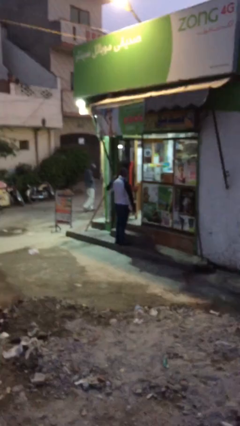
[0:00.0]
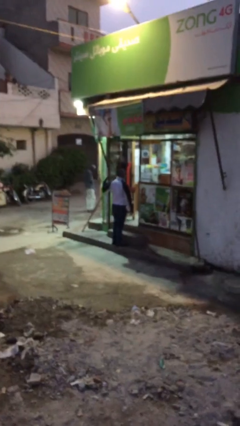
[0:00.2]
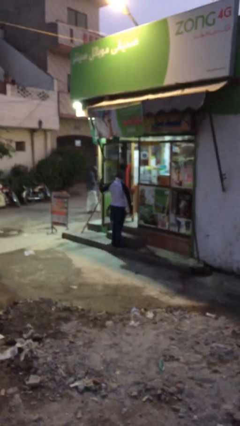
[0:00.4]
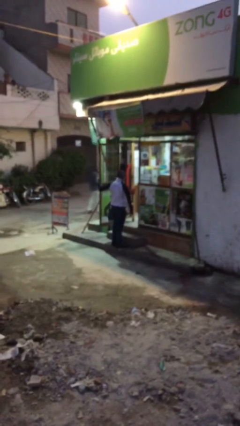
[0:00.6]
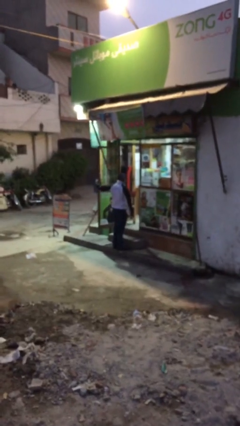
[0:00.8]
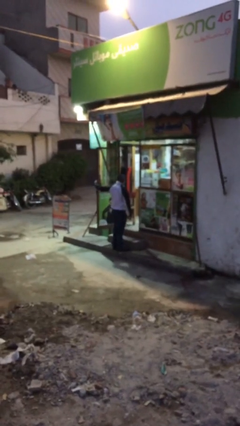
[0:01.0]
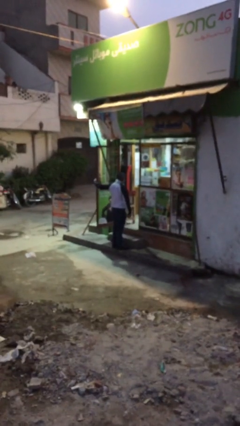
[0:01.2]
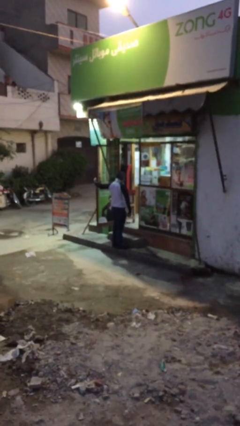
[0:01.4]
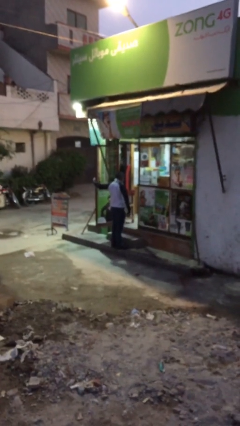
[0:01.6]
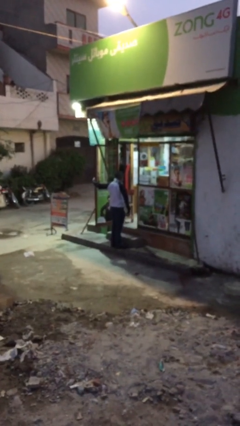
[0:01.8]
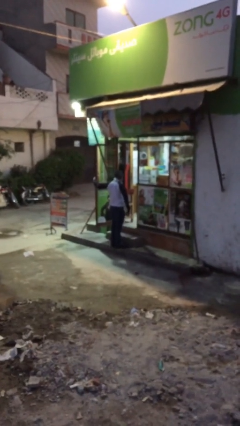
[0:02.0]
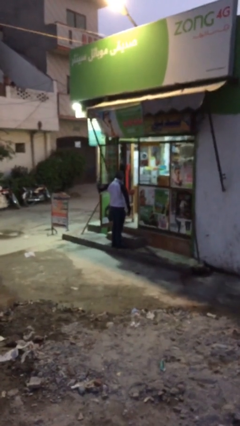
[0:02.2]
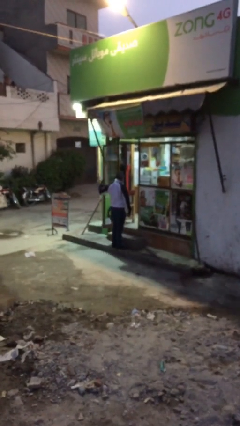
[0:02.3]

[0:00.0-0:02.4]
person opens facility door

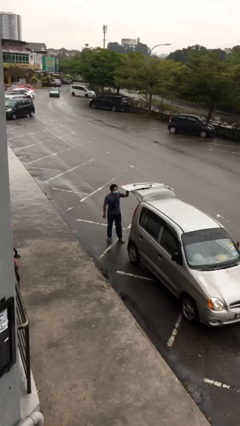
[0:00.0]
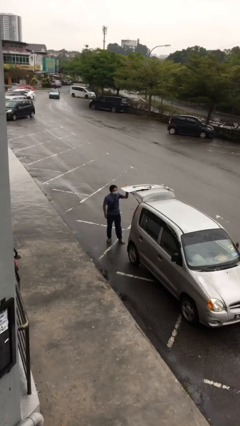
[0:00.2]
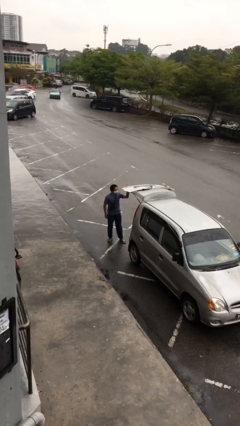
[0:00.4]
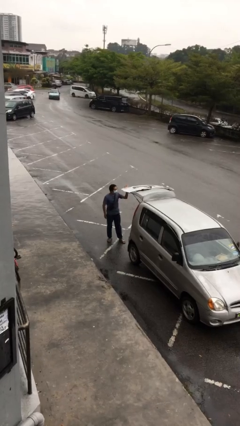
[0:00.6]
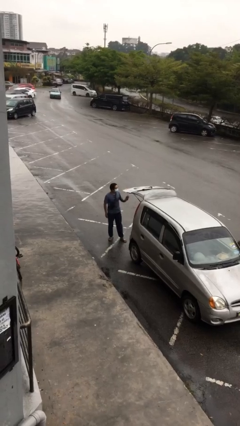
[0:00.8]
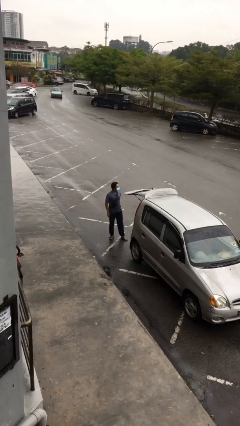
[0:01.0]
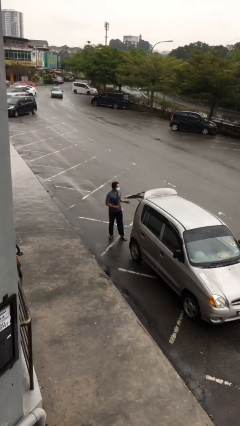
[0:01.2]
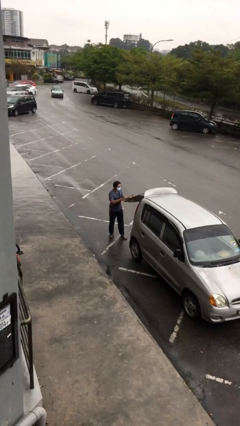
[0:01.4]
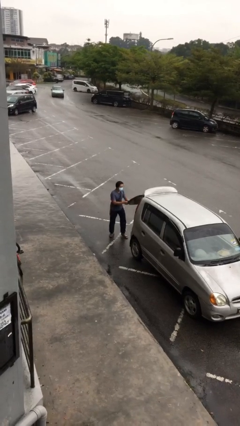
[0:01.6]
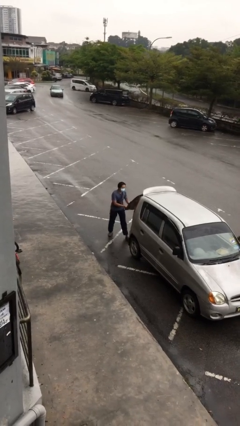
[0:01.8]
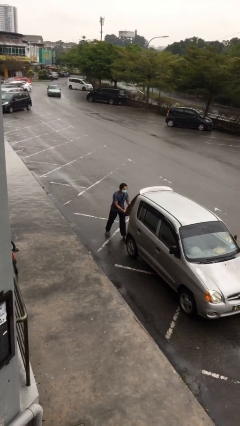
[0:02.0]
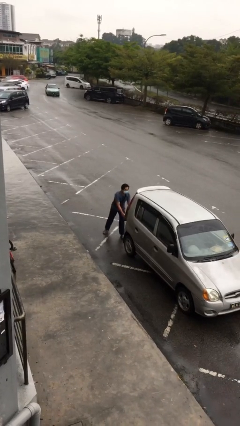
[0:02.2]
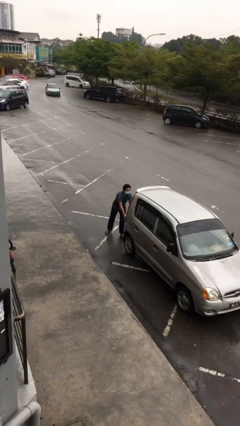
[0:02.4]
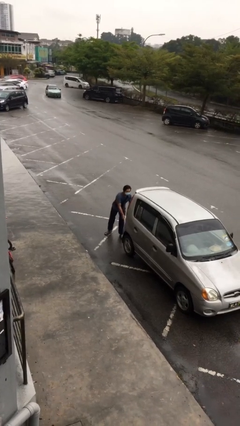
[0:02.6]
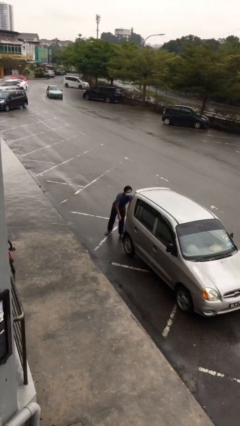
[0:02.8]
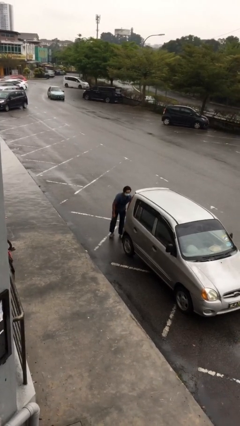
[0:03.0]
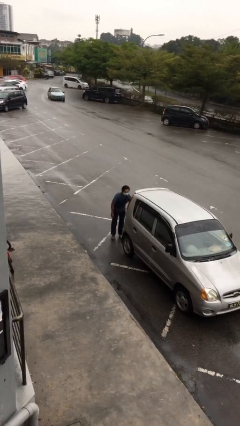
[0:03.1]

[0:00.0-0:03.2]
person closes car trunk

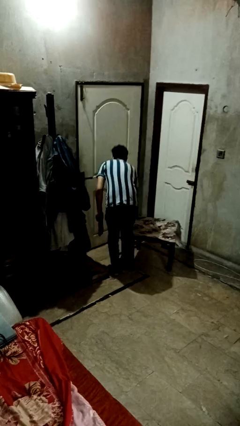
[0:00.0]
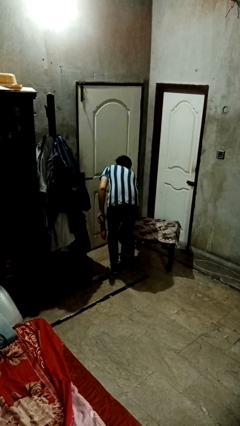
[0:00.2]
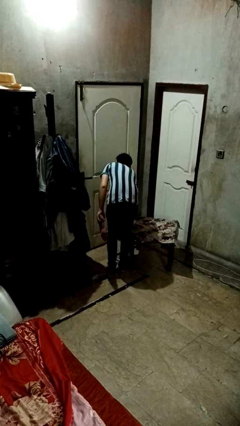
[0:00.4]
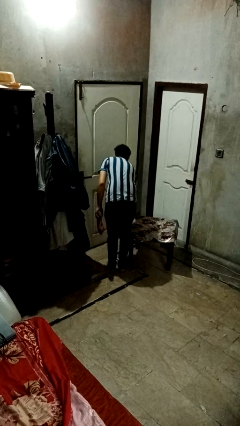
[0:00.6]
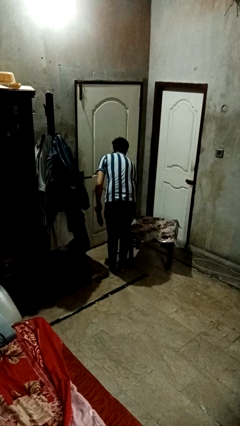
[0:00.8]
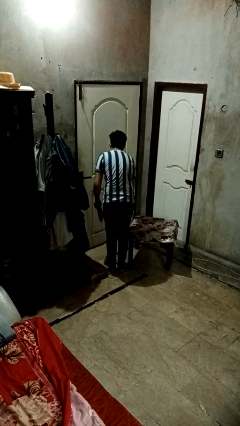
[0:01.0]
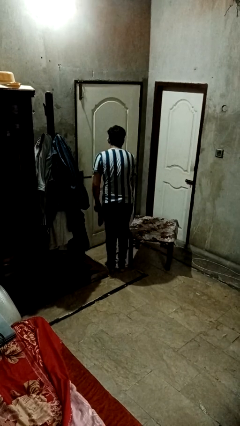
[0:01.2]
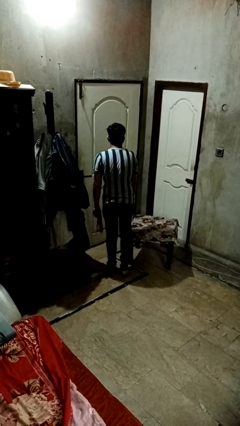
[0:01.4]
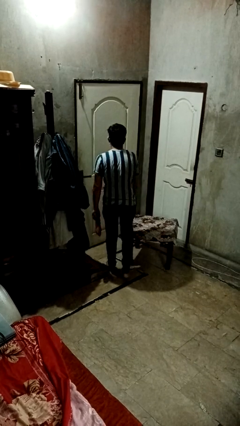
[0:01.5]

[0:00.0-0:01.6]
person bumps into table

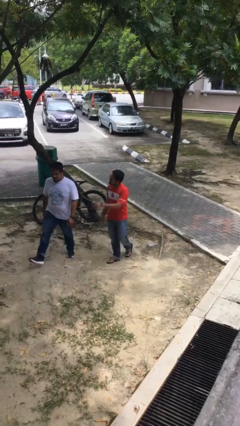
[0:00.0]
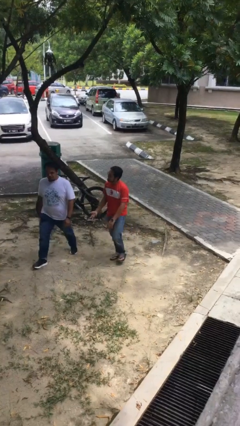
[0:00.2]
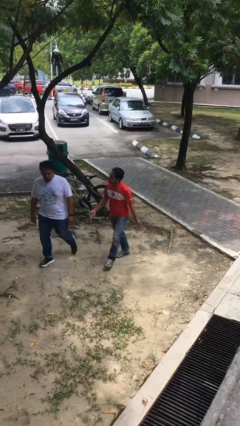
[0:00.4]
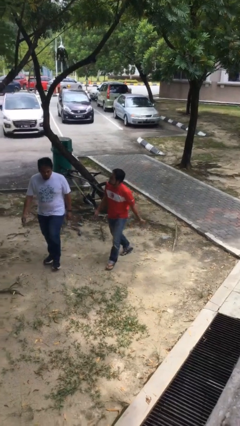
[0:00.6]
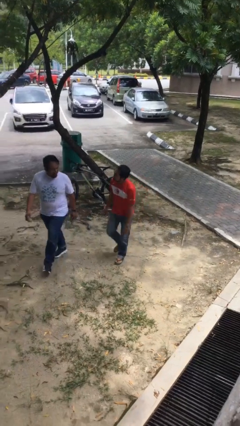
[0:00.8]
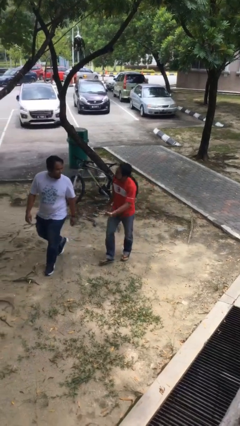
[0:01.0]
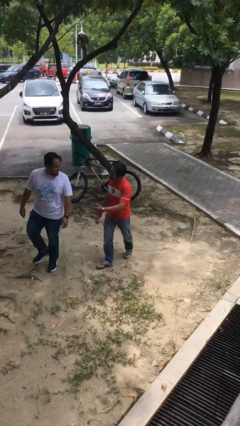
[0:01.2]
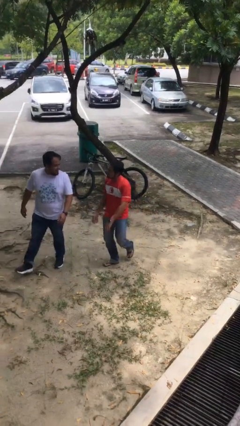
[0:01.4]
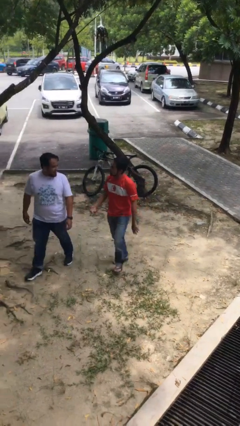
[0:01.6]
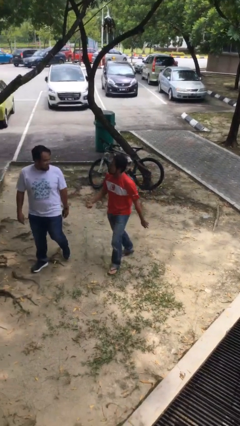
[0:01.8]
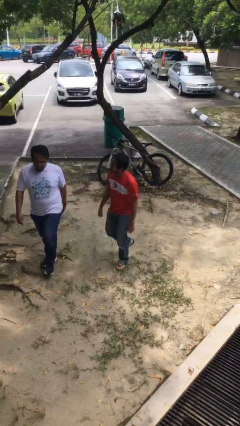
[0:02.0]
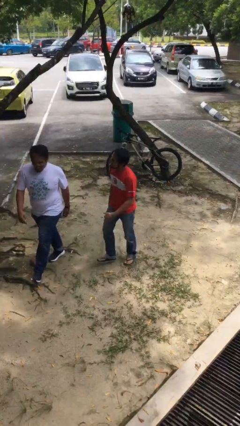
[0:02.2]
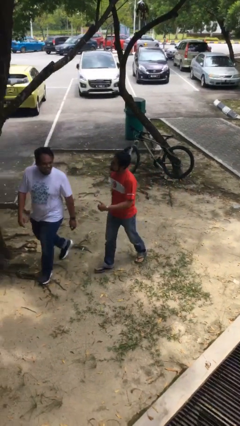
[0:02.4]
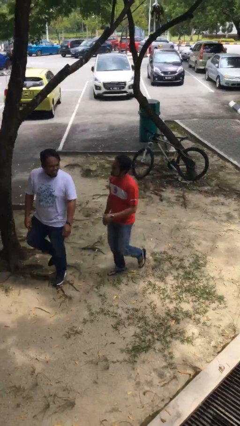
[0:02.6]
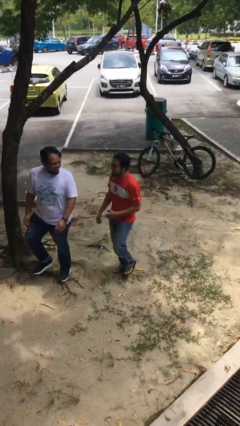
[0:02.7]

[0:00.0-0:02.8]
person talks to person

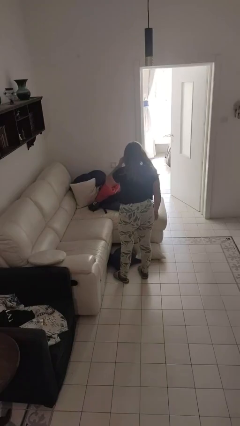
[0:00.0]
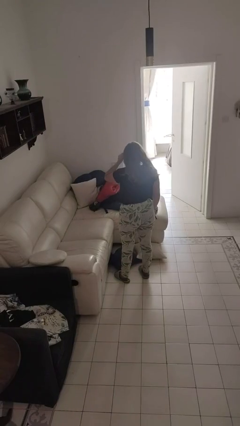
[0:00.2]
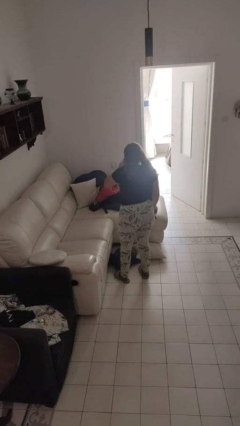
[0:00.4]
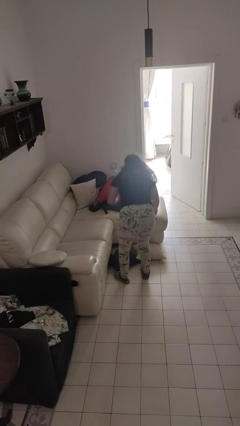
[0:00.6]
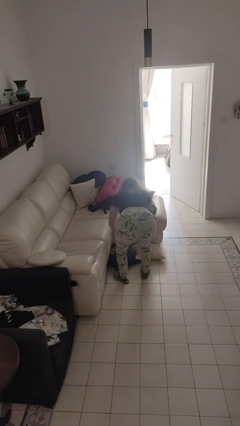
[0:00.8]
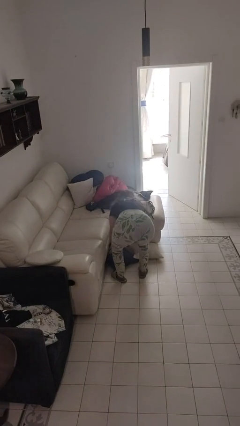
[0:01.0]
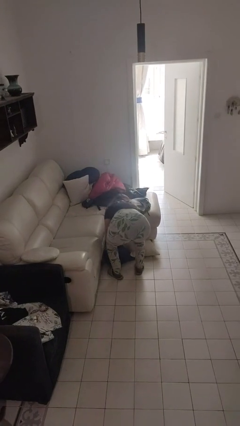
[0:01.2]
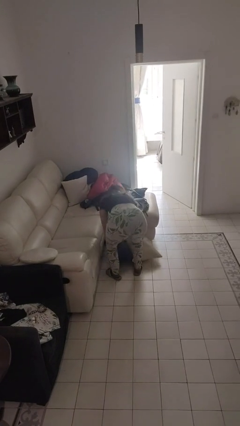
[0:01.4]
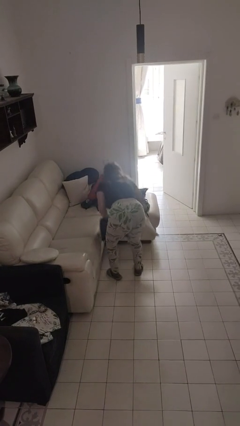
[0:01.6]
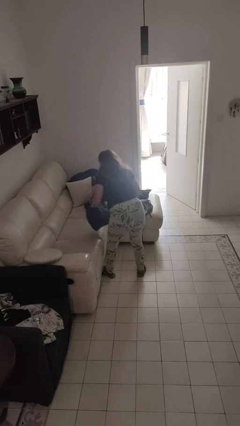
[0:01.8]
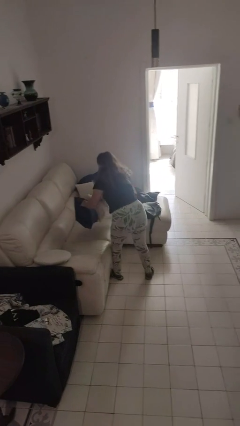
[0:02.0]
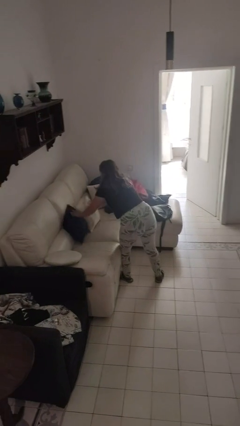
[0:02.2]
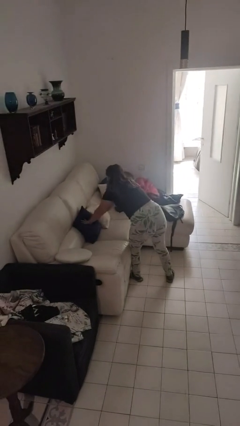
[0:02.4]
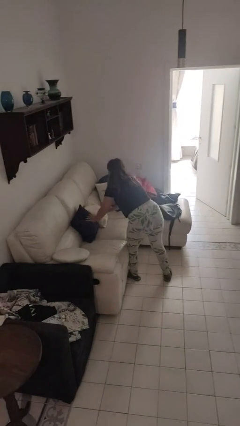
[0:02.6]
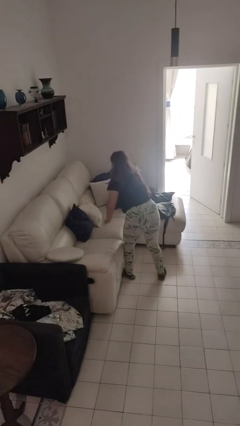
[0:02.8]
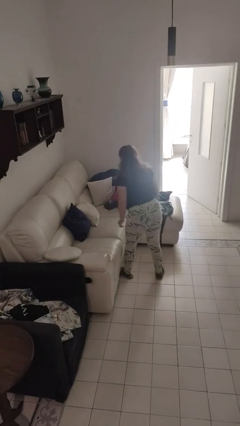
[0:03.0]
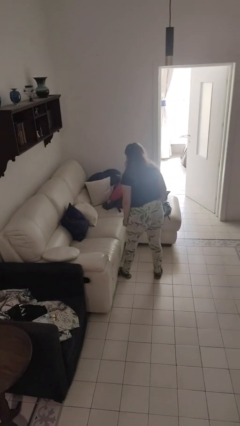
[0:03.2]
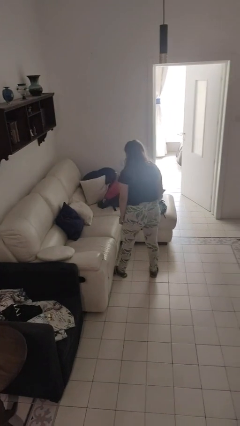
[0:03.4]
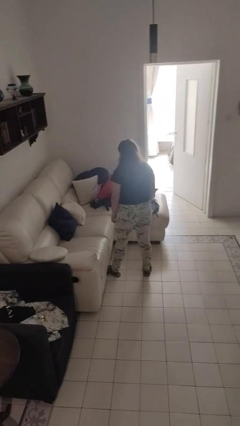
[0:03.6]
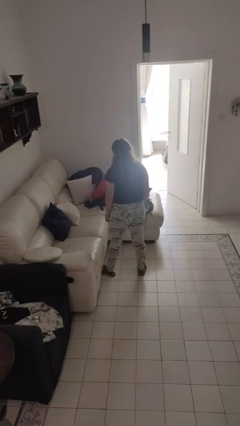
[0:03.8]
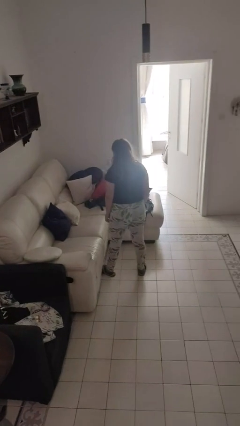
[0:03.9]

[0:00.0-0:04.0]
person sets upright furniture

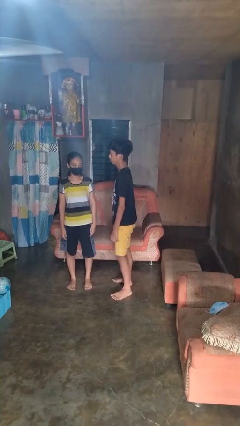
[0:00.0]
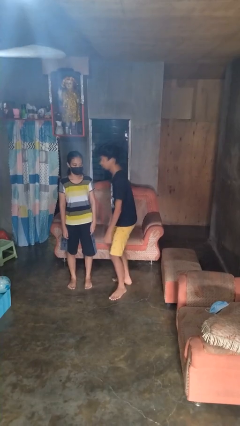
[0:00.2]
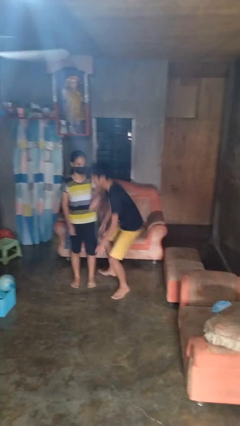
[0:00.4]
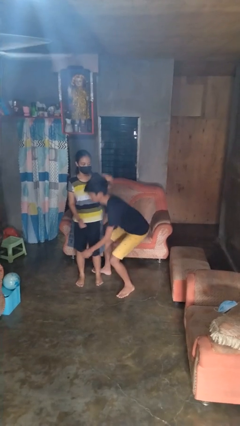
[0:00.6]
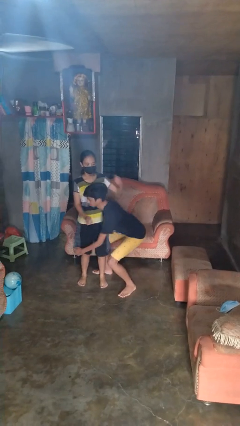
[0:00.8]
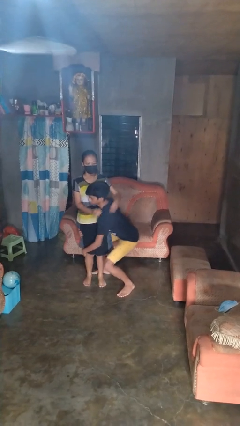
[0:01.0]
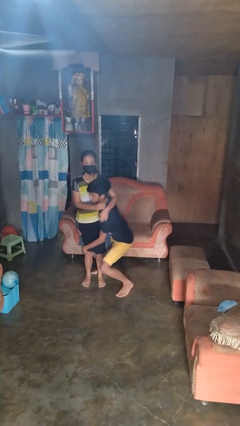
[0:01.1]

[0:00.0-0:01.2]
person carries person over shoulder

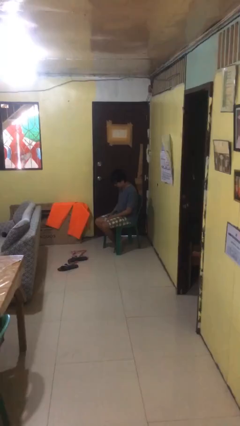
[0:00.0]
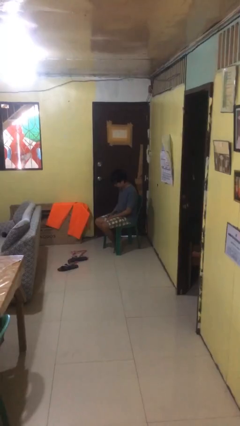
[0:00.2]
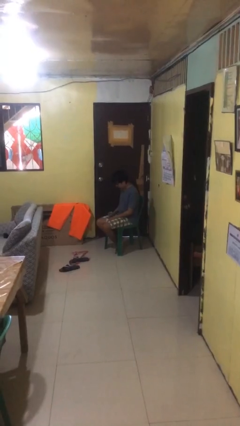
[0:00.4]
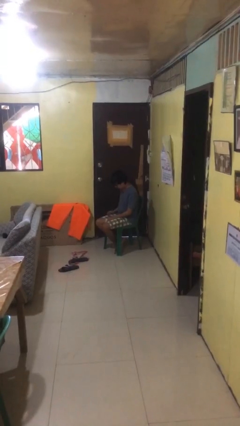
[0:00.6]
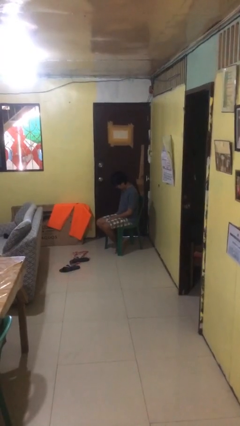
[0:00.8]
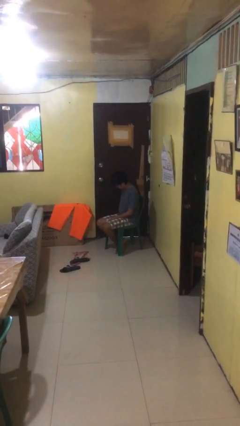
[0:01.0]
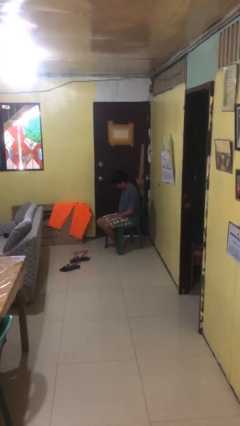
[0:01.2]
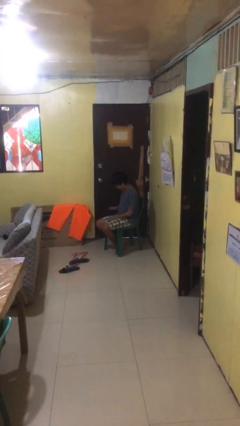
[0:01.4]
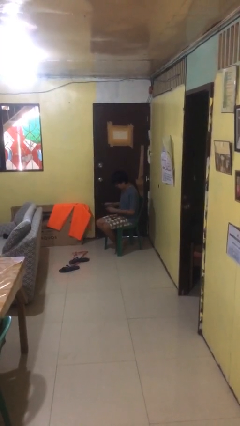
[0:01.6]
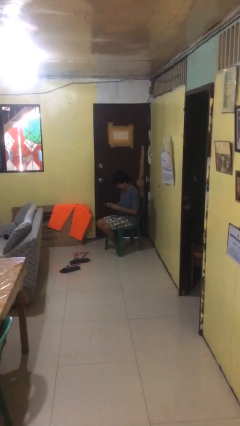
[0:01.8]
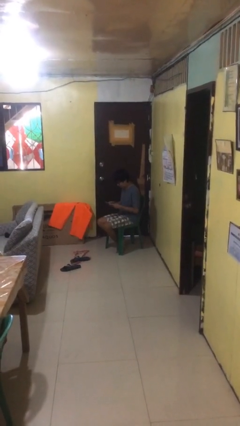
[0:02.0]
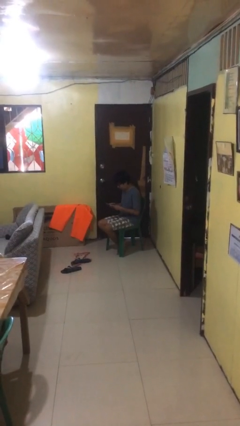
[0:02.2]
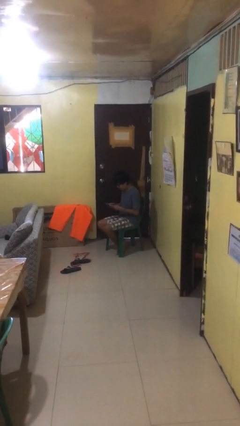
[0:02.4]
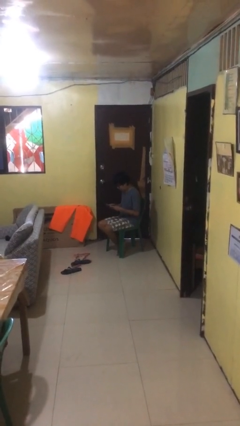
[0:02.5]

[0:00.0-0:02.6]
person takes phone from pocket
